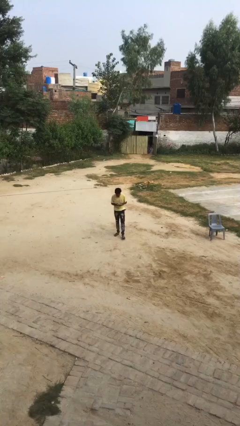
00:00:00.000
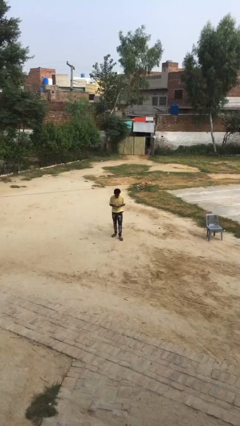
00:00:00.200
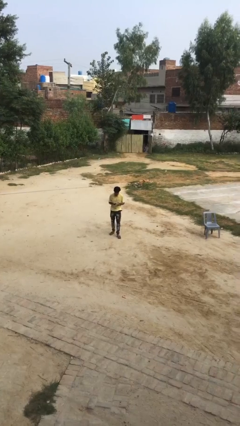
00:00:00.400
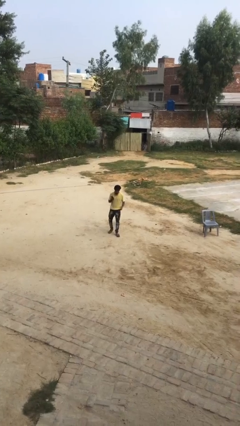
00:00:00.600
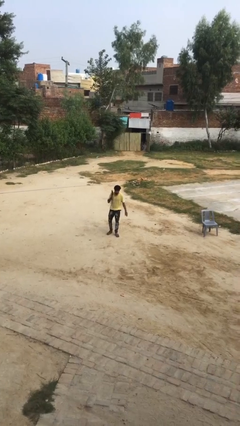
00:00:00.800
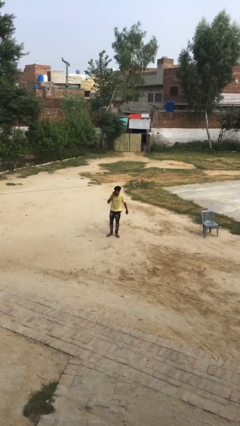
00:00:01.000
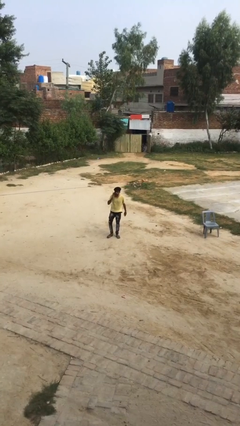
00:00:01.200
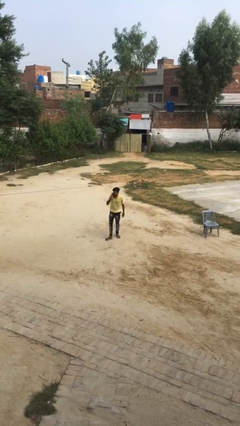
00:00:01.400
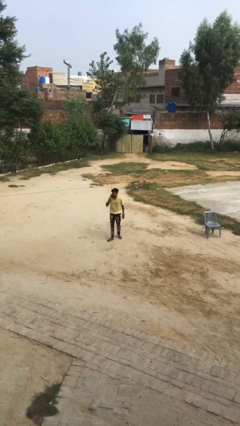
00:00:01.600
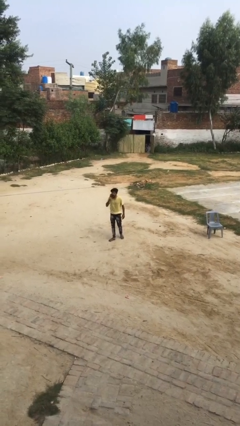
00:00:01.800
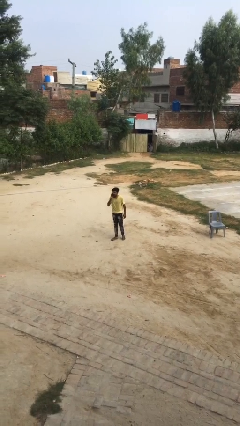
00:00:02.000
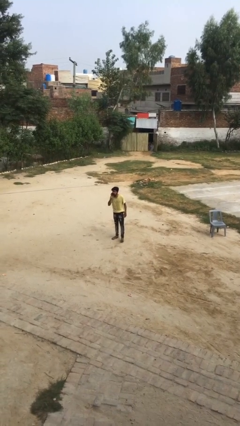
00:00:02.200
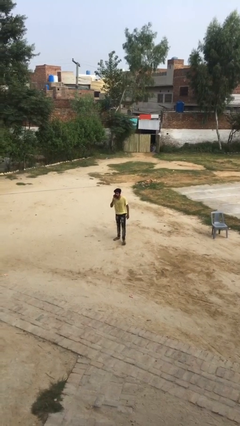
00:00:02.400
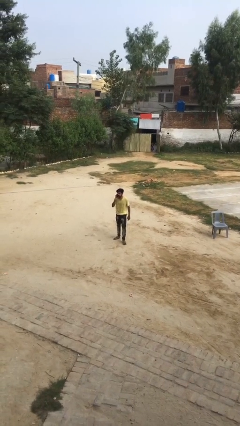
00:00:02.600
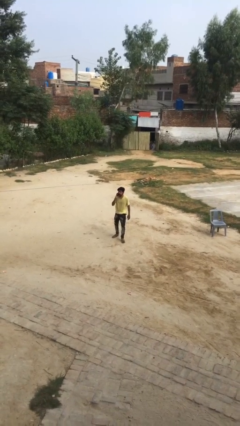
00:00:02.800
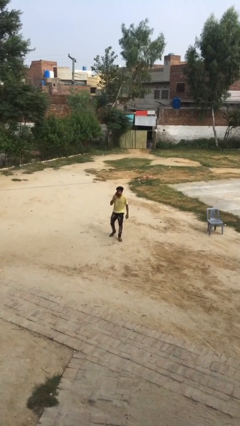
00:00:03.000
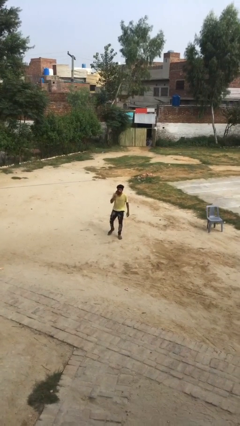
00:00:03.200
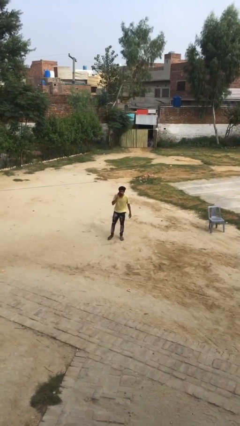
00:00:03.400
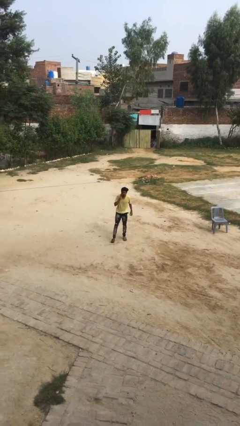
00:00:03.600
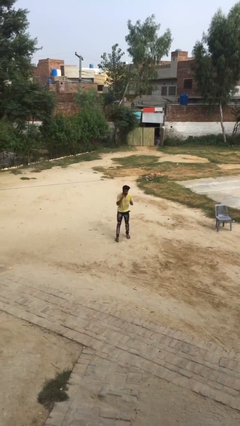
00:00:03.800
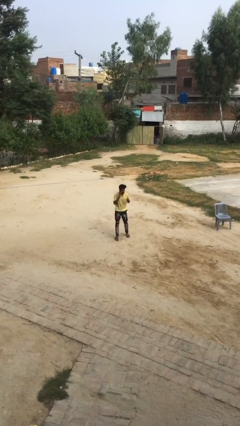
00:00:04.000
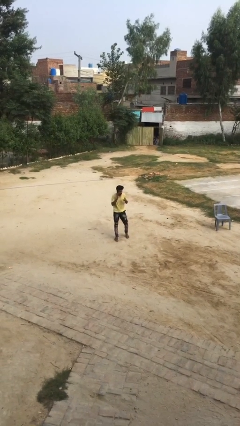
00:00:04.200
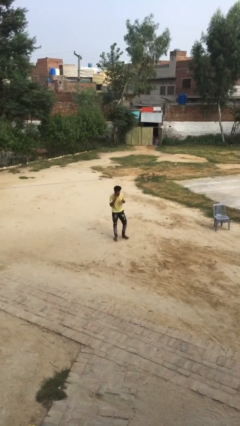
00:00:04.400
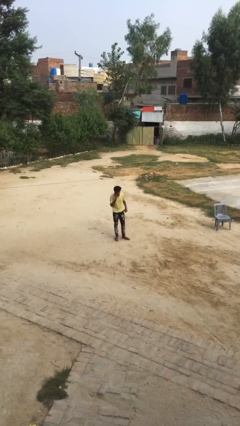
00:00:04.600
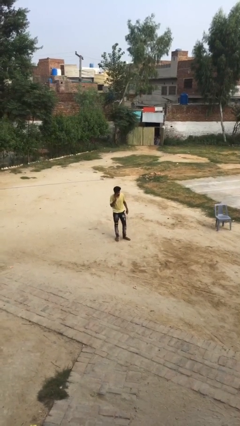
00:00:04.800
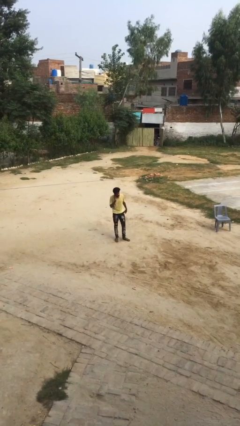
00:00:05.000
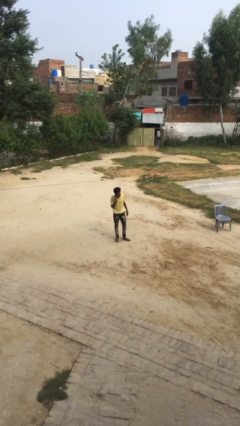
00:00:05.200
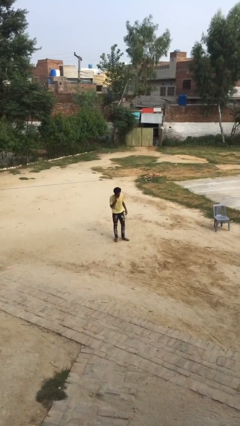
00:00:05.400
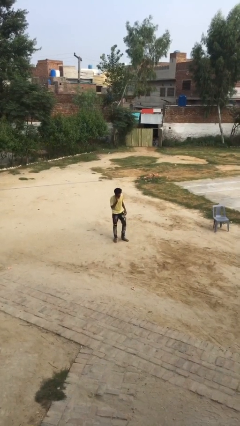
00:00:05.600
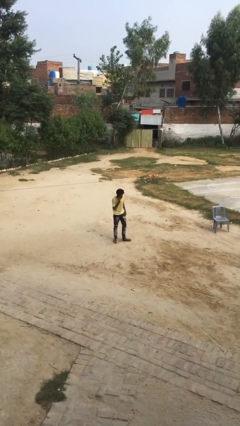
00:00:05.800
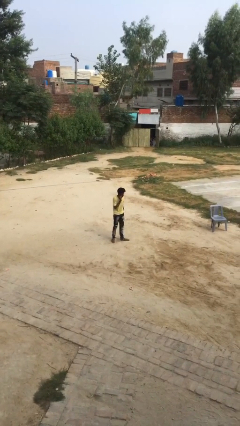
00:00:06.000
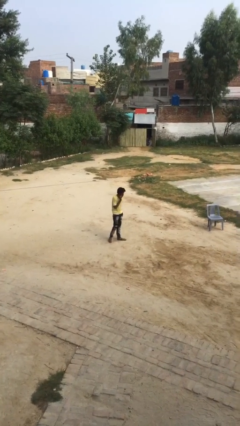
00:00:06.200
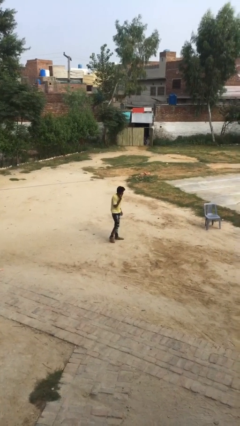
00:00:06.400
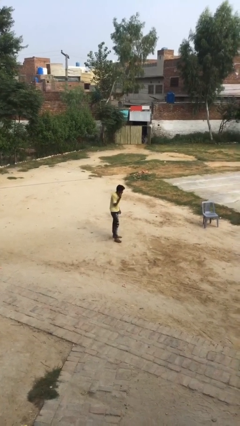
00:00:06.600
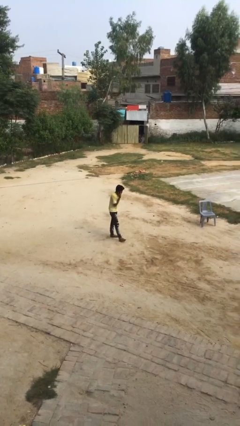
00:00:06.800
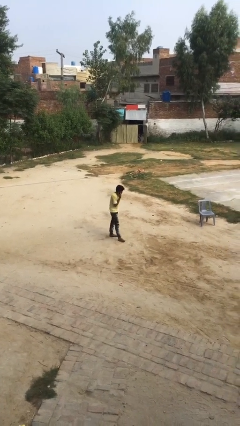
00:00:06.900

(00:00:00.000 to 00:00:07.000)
person talks on phone

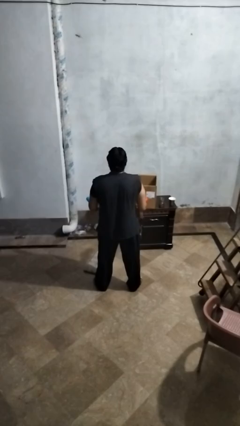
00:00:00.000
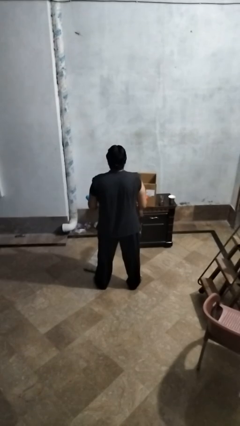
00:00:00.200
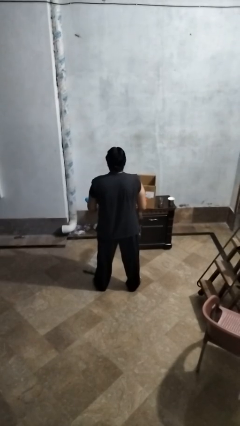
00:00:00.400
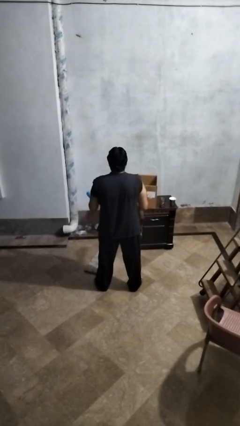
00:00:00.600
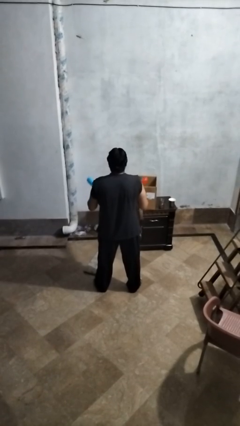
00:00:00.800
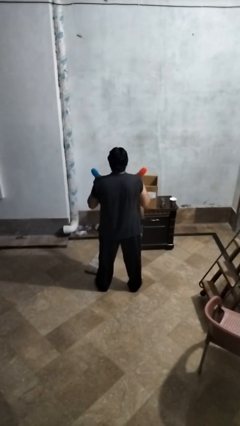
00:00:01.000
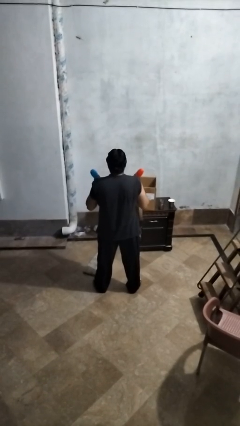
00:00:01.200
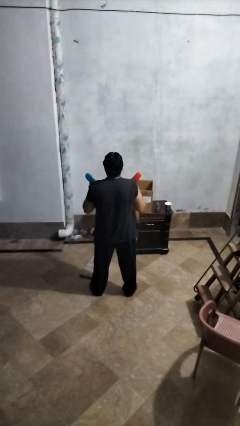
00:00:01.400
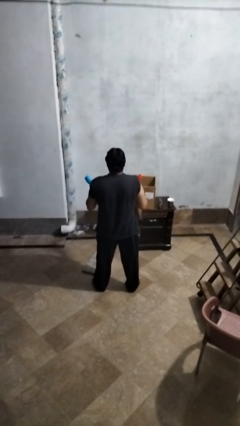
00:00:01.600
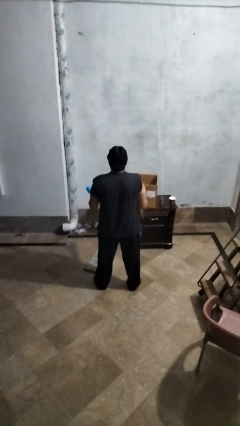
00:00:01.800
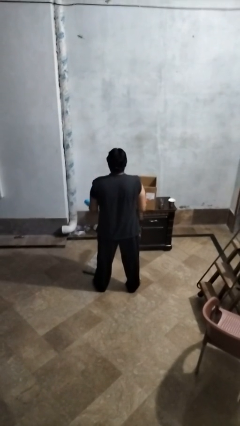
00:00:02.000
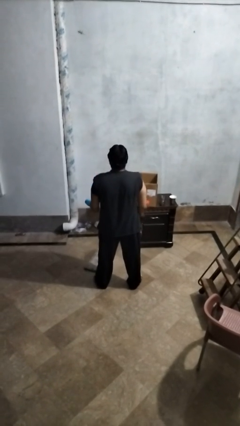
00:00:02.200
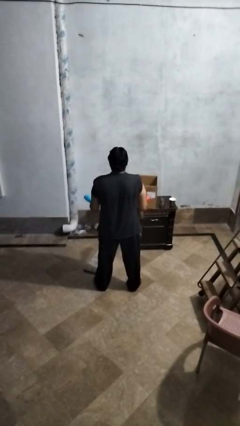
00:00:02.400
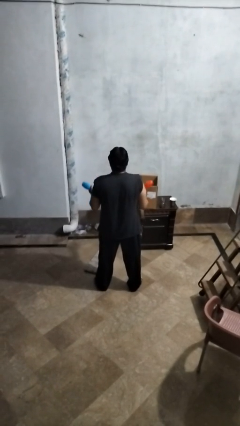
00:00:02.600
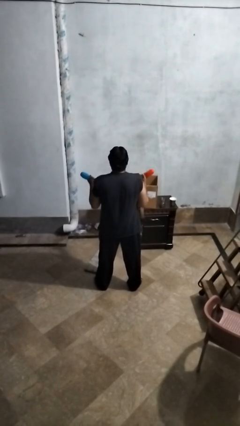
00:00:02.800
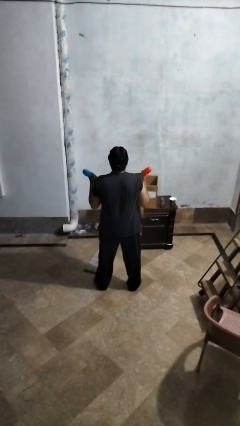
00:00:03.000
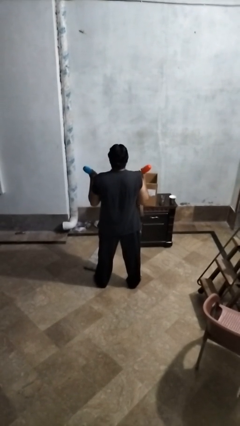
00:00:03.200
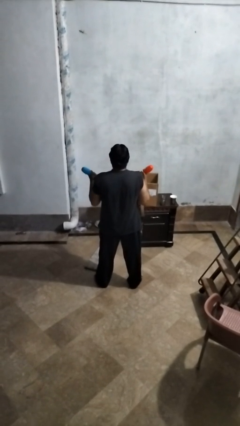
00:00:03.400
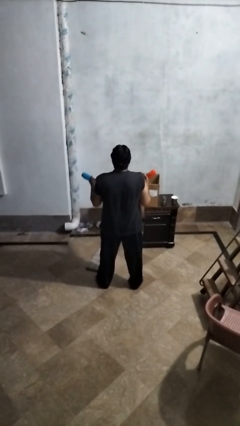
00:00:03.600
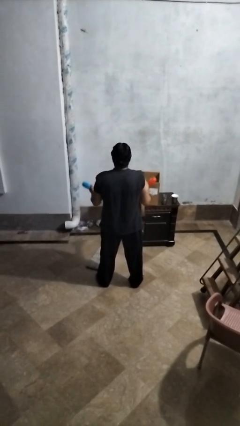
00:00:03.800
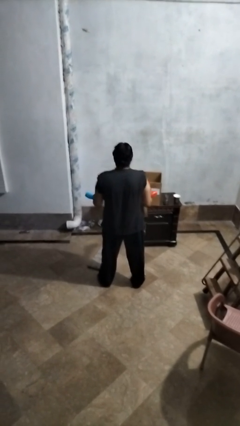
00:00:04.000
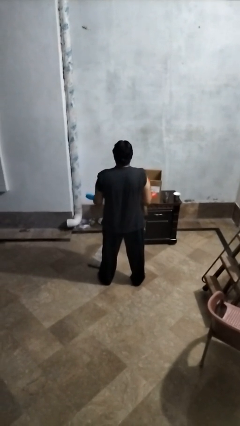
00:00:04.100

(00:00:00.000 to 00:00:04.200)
person lifts dumbbells

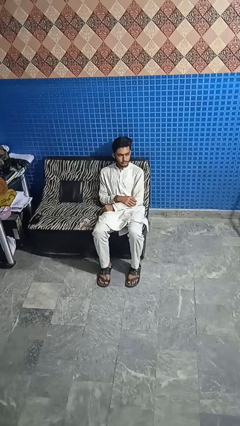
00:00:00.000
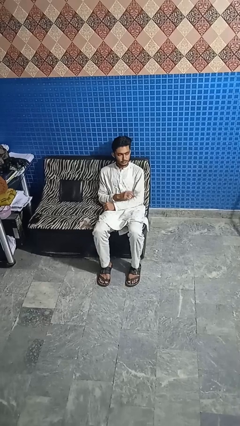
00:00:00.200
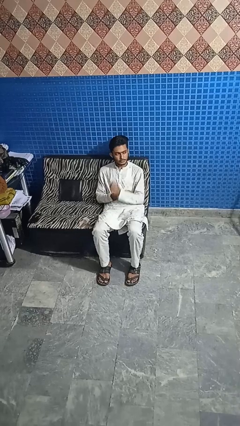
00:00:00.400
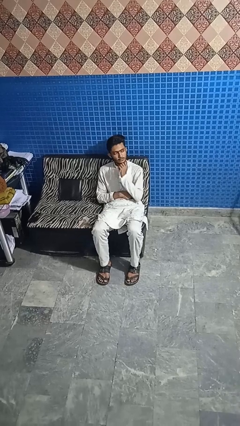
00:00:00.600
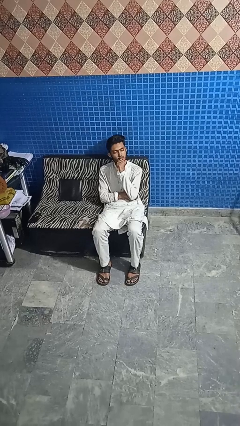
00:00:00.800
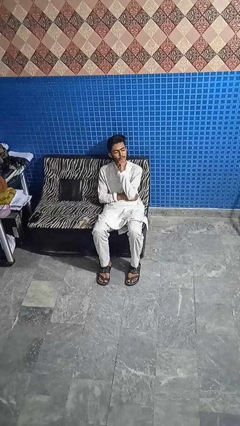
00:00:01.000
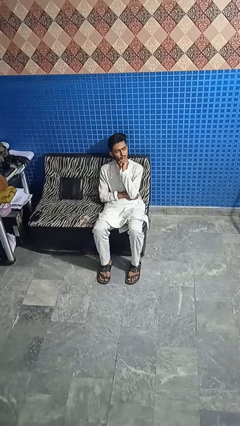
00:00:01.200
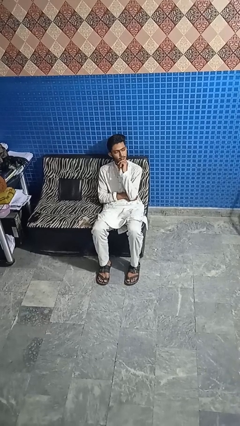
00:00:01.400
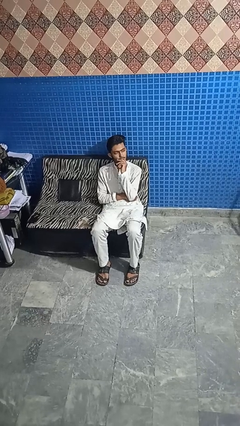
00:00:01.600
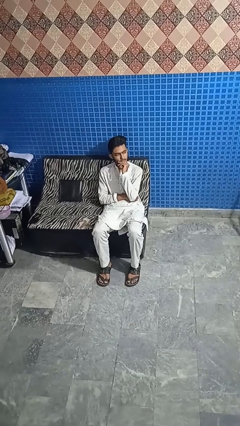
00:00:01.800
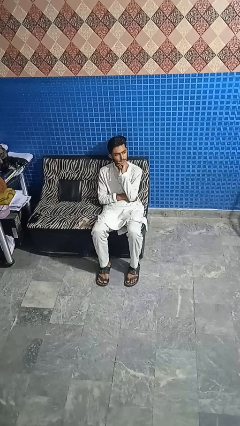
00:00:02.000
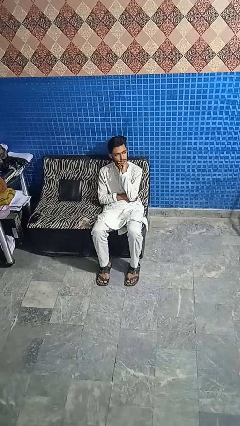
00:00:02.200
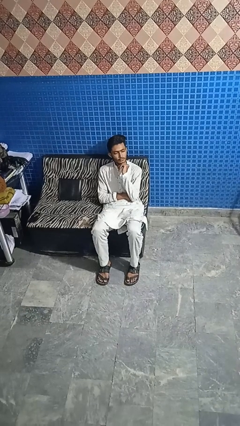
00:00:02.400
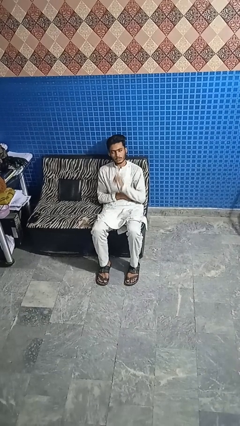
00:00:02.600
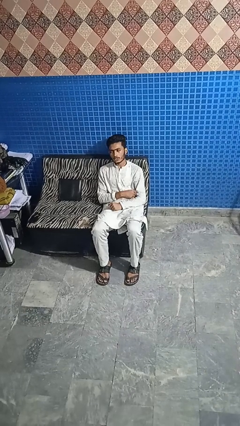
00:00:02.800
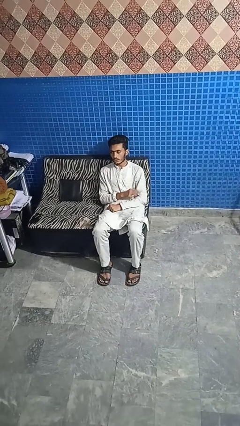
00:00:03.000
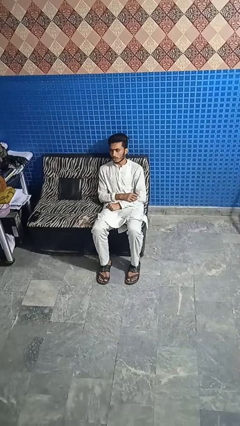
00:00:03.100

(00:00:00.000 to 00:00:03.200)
person strokes chin

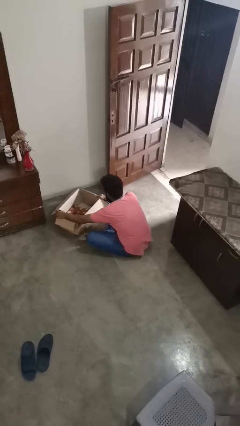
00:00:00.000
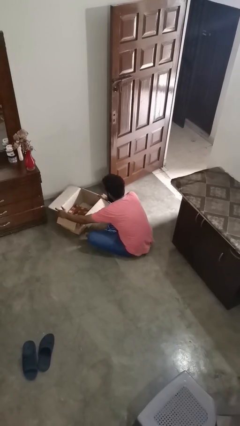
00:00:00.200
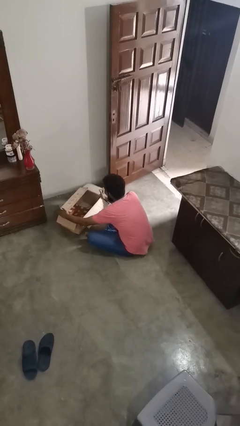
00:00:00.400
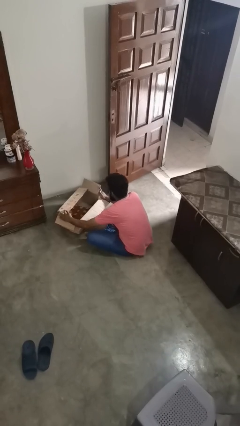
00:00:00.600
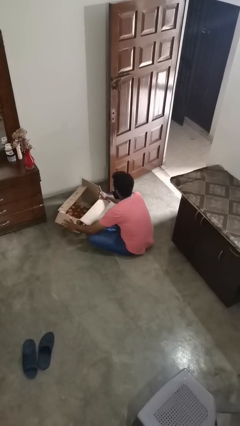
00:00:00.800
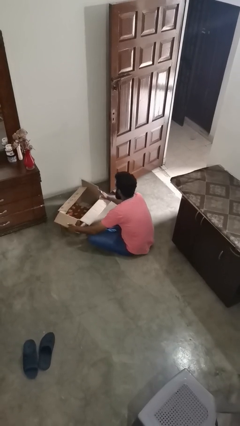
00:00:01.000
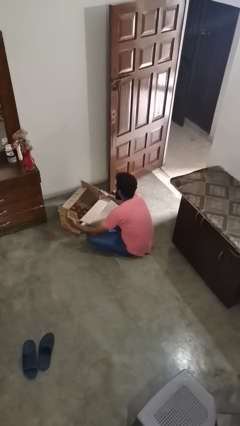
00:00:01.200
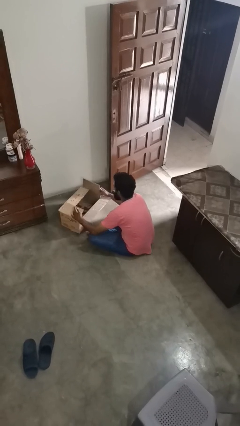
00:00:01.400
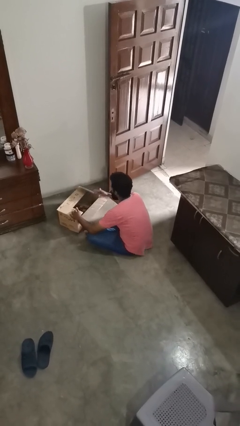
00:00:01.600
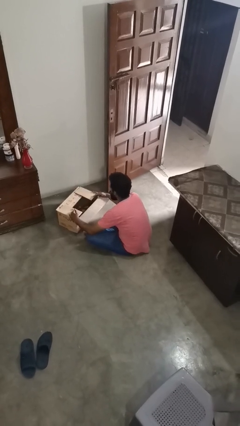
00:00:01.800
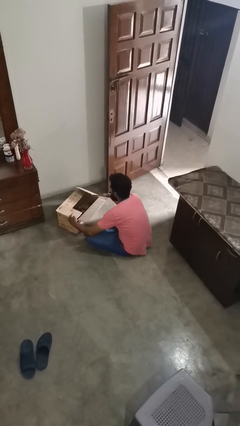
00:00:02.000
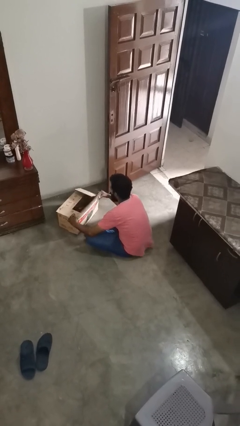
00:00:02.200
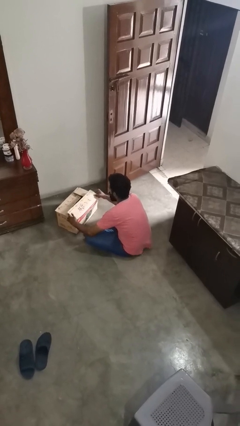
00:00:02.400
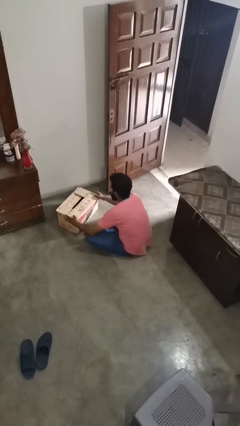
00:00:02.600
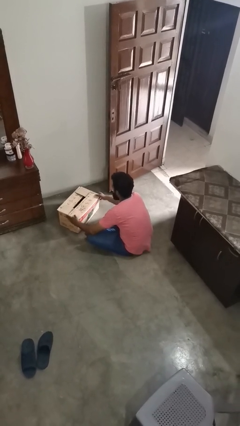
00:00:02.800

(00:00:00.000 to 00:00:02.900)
person closes box

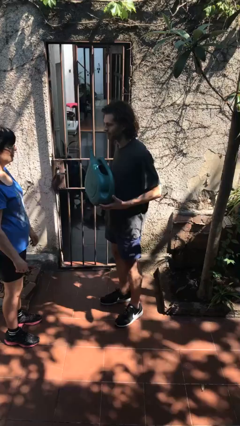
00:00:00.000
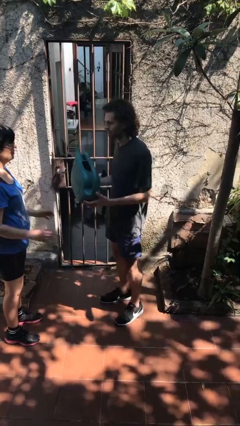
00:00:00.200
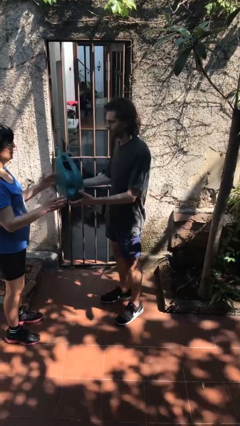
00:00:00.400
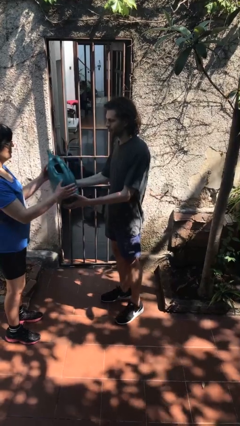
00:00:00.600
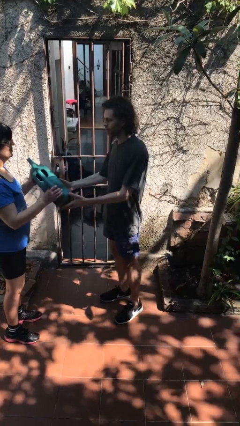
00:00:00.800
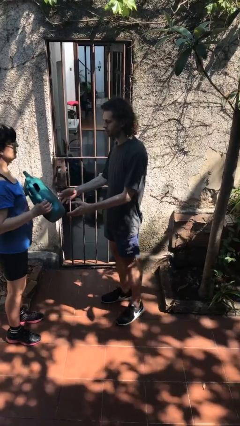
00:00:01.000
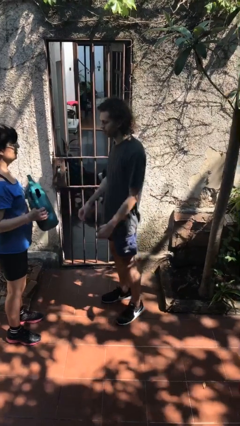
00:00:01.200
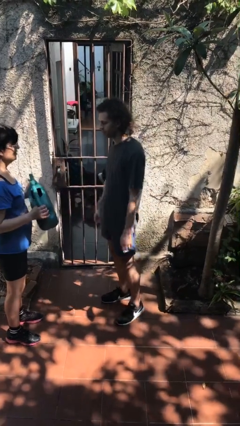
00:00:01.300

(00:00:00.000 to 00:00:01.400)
person transfers object to person
